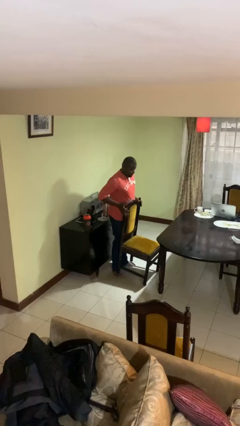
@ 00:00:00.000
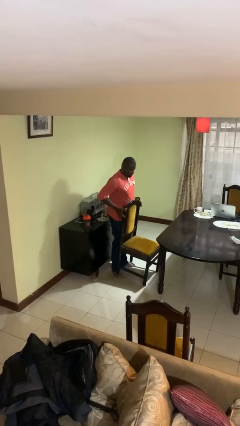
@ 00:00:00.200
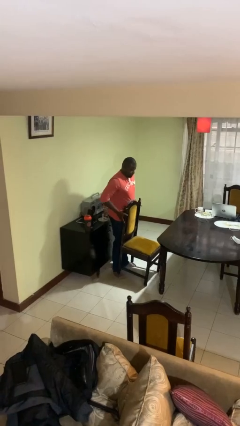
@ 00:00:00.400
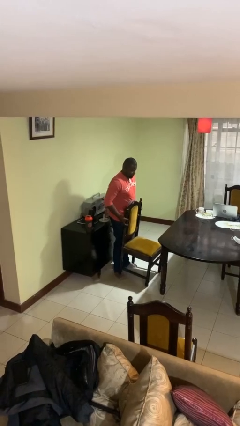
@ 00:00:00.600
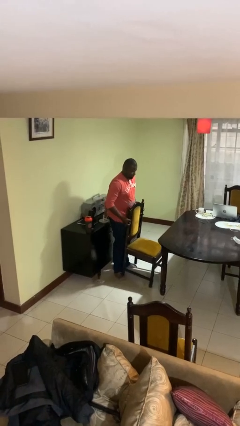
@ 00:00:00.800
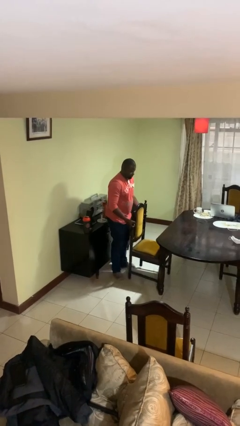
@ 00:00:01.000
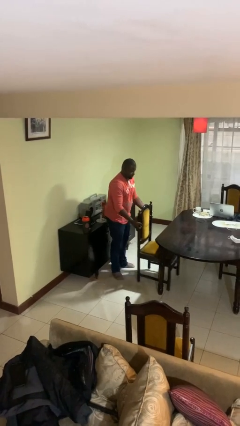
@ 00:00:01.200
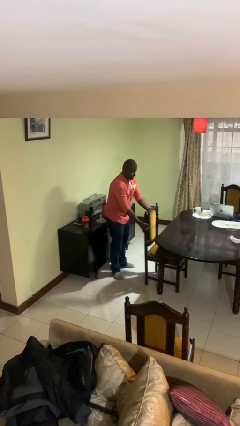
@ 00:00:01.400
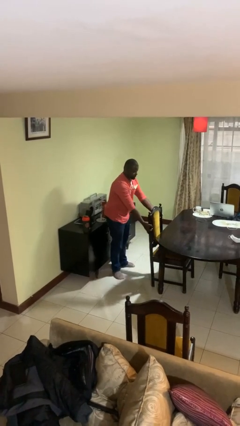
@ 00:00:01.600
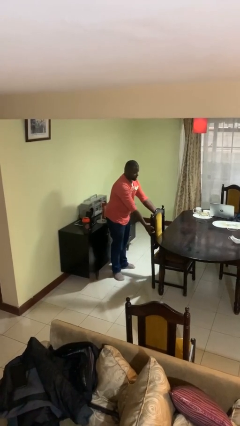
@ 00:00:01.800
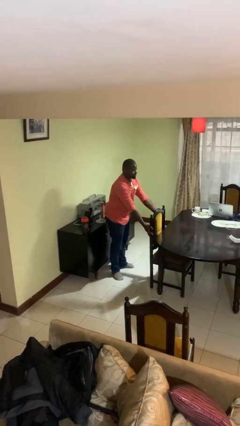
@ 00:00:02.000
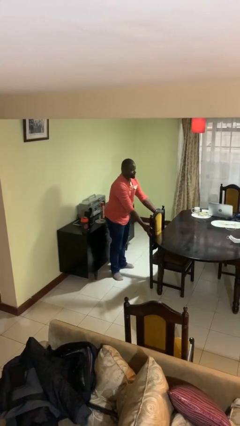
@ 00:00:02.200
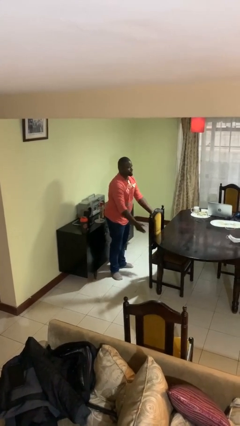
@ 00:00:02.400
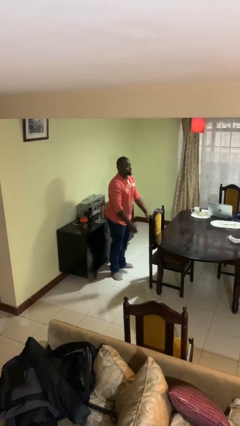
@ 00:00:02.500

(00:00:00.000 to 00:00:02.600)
person pushes in chair

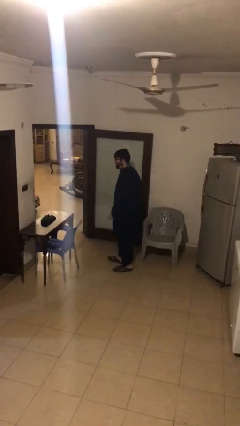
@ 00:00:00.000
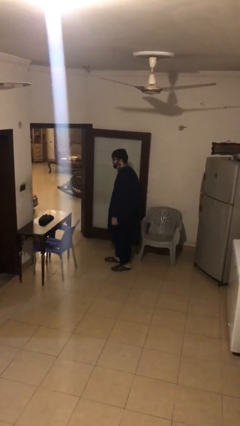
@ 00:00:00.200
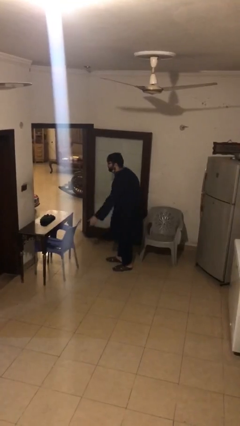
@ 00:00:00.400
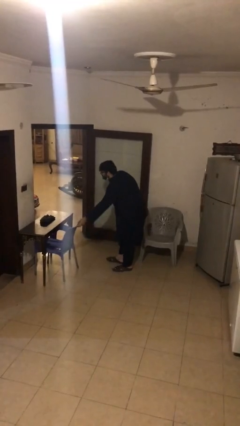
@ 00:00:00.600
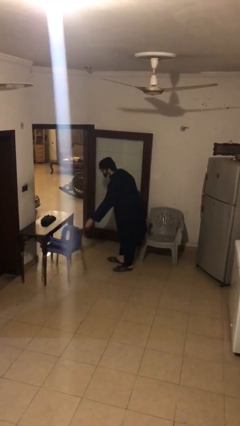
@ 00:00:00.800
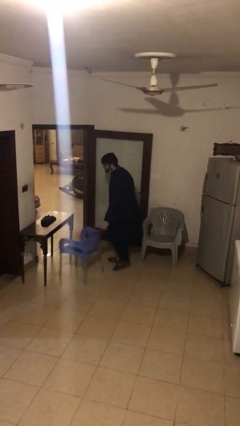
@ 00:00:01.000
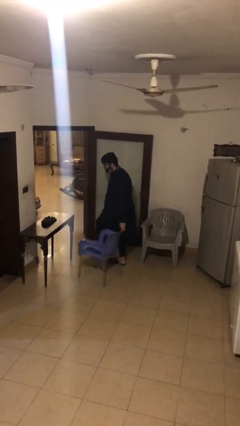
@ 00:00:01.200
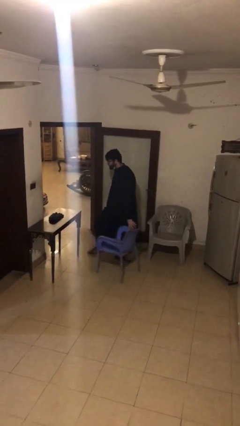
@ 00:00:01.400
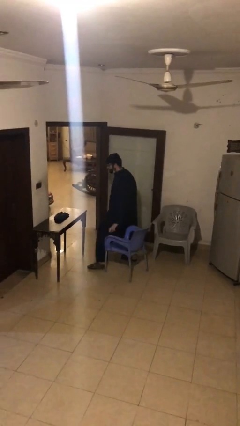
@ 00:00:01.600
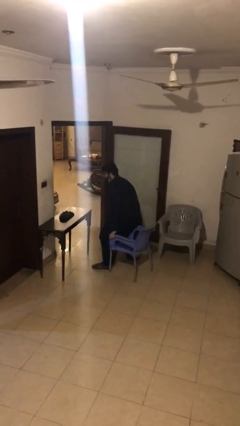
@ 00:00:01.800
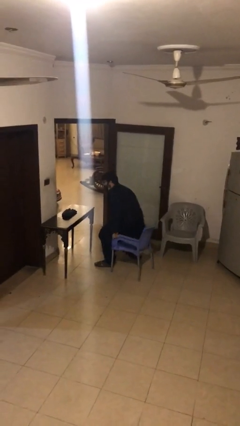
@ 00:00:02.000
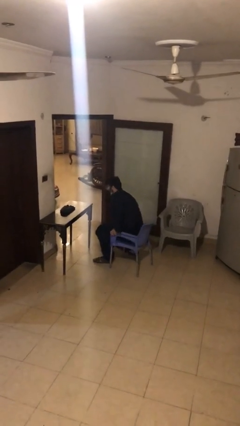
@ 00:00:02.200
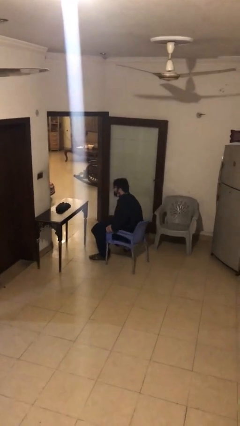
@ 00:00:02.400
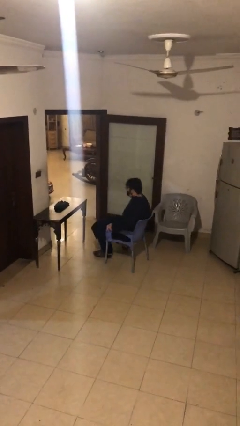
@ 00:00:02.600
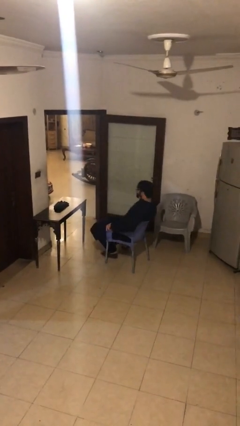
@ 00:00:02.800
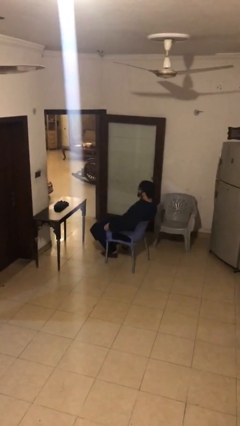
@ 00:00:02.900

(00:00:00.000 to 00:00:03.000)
person sits down

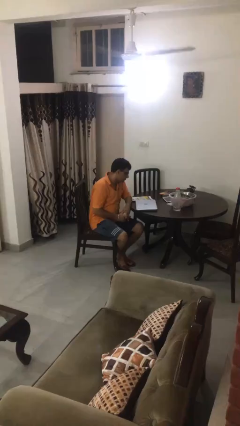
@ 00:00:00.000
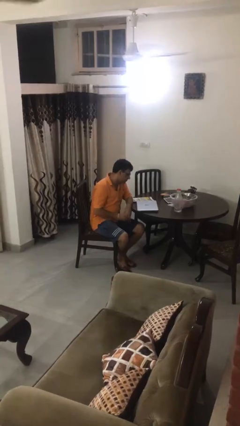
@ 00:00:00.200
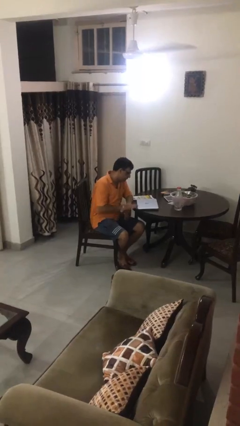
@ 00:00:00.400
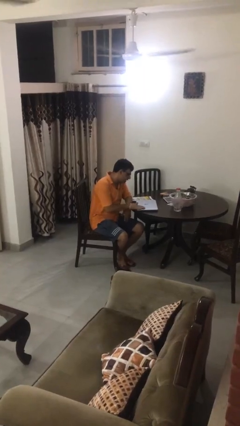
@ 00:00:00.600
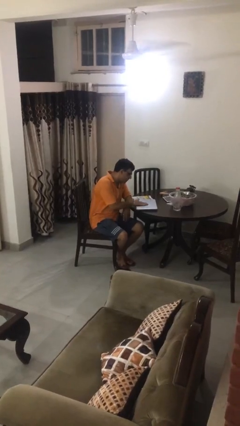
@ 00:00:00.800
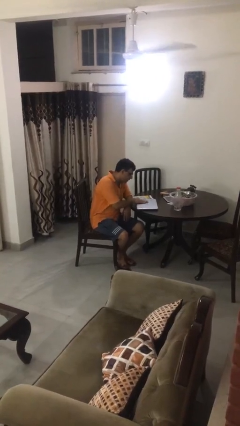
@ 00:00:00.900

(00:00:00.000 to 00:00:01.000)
person waves hand over object

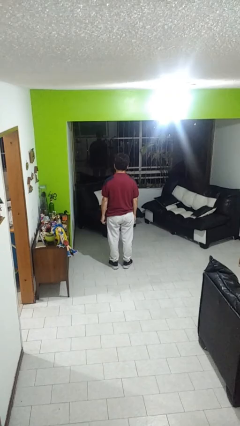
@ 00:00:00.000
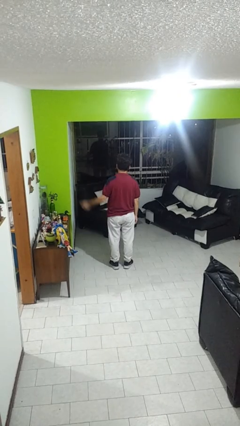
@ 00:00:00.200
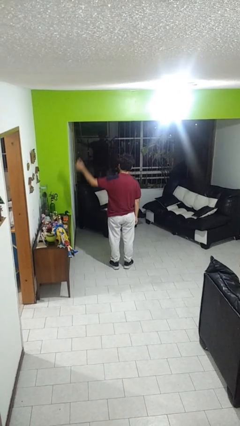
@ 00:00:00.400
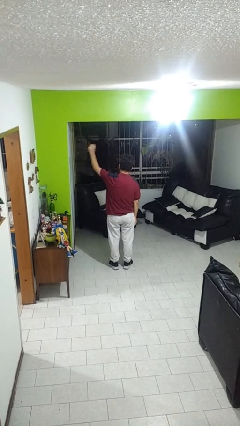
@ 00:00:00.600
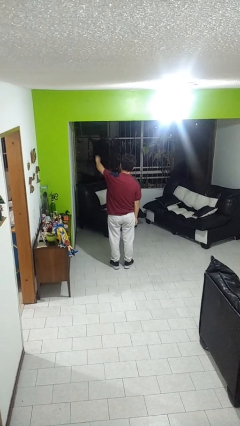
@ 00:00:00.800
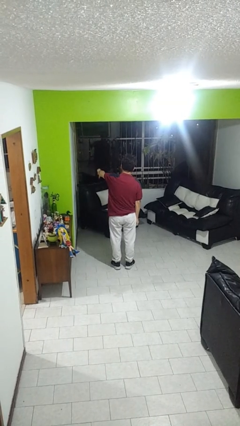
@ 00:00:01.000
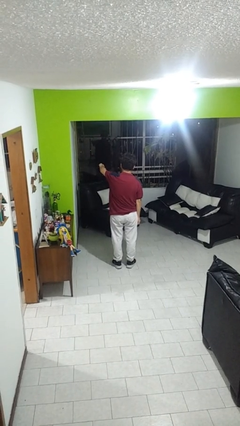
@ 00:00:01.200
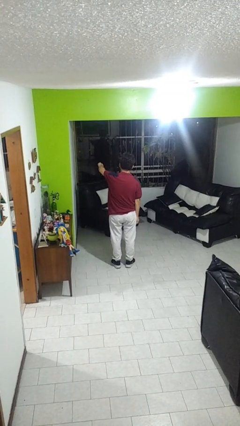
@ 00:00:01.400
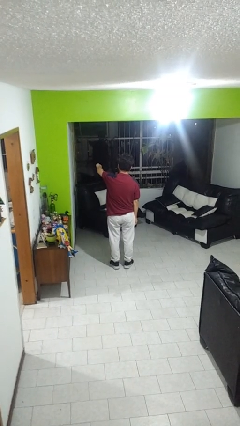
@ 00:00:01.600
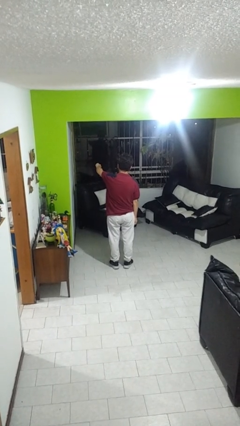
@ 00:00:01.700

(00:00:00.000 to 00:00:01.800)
person gestures thumbs down

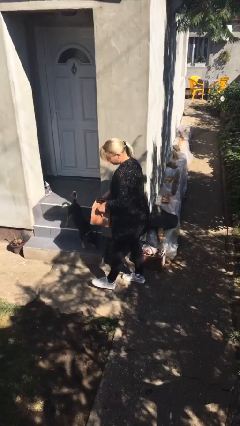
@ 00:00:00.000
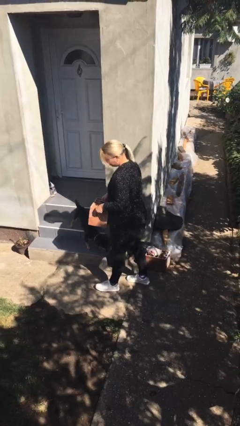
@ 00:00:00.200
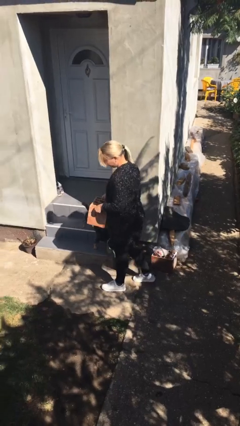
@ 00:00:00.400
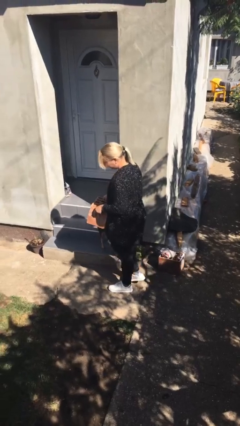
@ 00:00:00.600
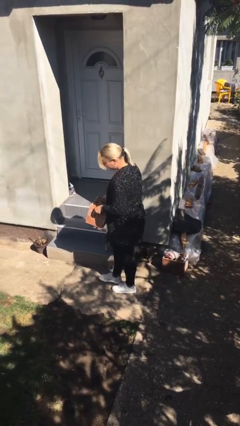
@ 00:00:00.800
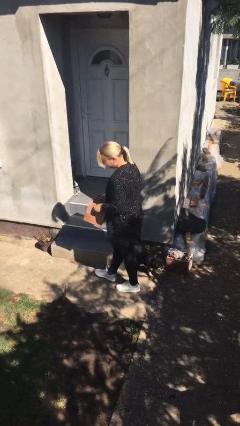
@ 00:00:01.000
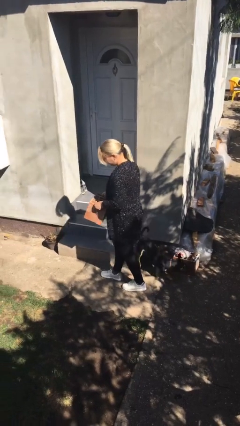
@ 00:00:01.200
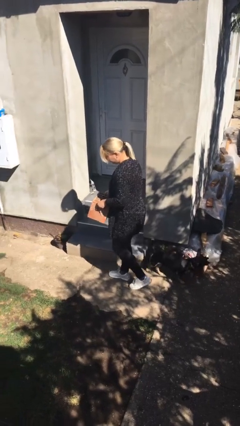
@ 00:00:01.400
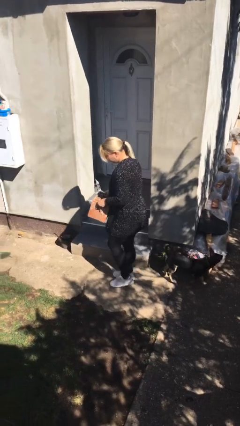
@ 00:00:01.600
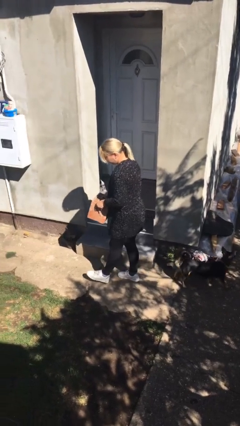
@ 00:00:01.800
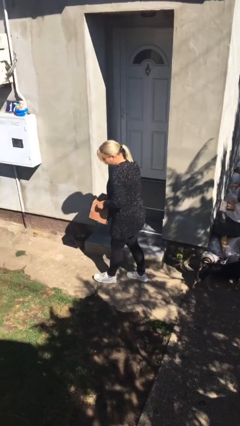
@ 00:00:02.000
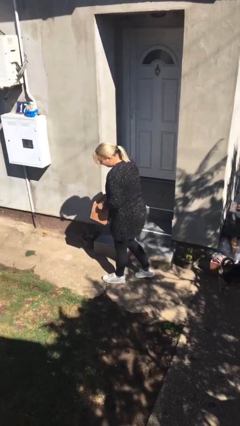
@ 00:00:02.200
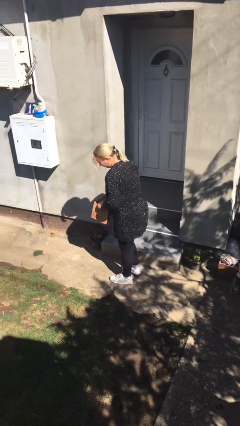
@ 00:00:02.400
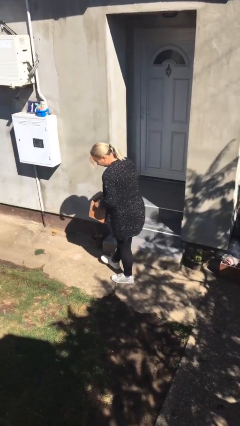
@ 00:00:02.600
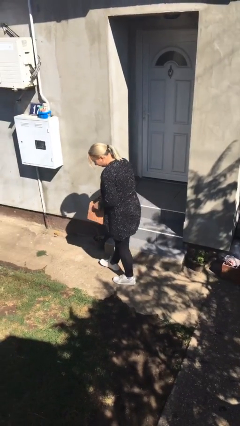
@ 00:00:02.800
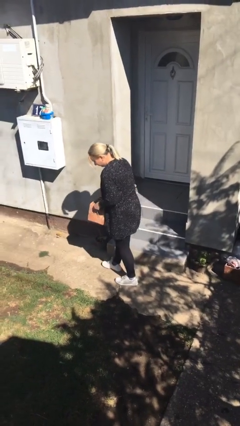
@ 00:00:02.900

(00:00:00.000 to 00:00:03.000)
person carries heavy object

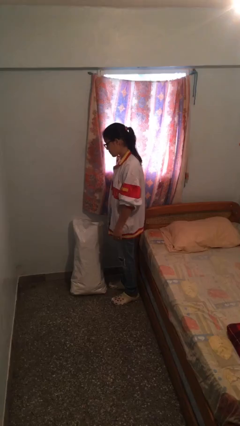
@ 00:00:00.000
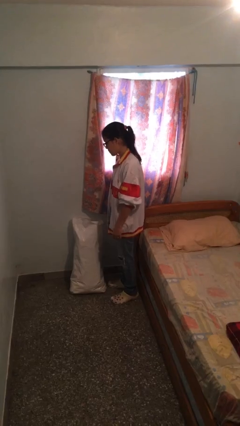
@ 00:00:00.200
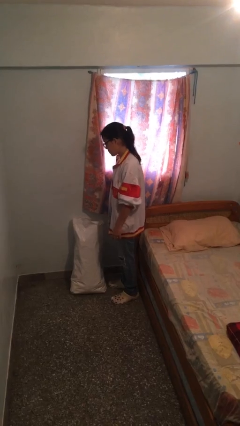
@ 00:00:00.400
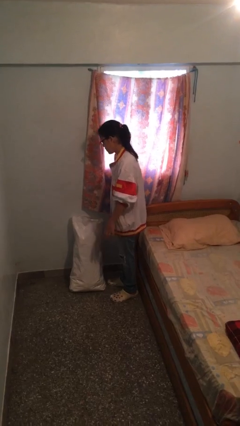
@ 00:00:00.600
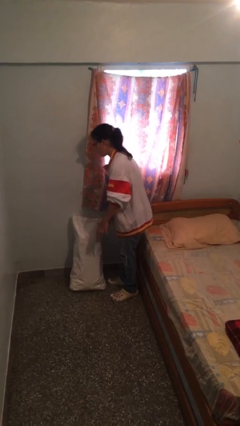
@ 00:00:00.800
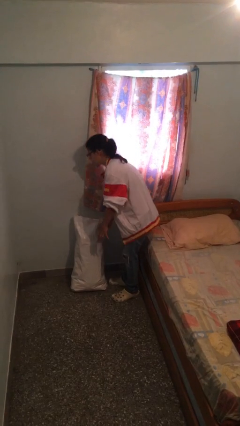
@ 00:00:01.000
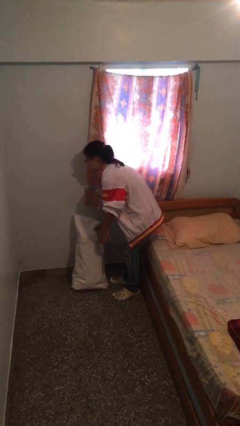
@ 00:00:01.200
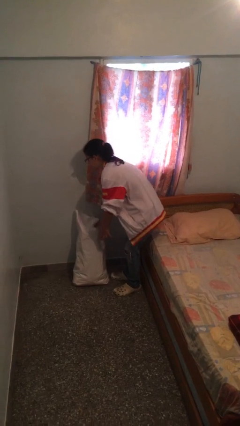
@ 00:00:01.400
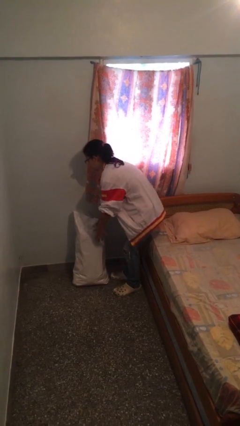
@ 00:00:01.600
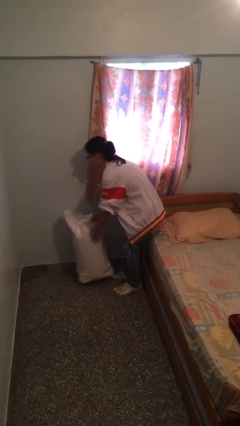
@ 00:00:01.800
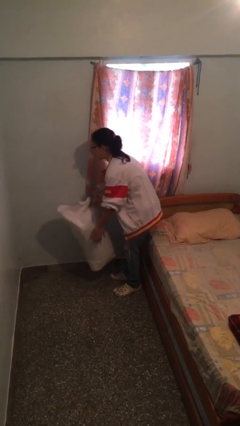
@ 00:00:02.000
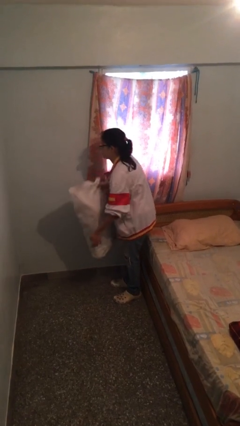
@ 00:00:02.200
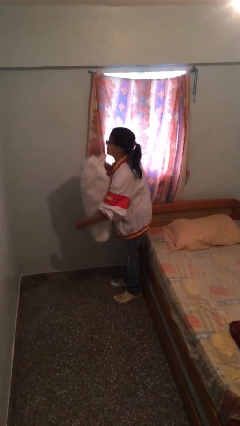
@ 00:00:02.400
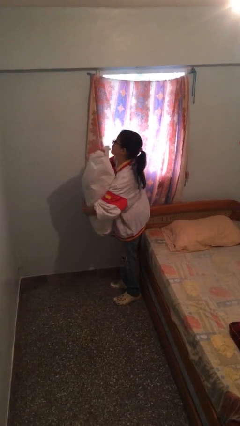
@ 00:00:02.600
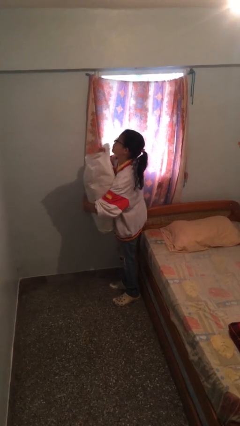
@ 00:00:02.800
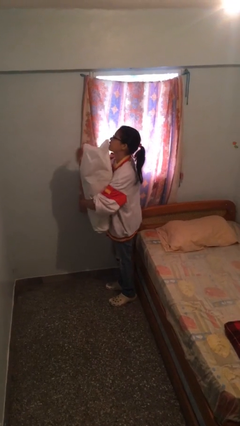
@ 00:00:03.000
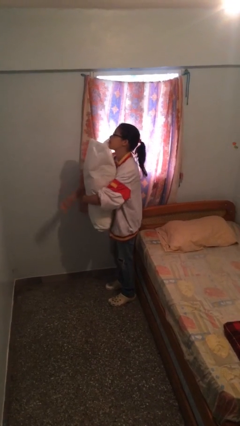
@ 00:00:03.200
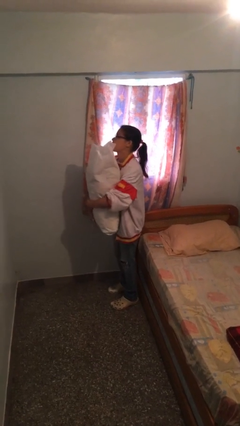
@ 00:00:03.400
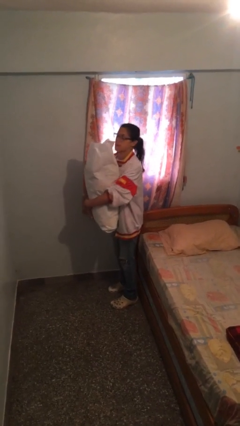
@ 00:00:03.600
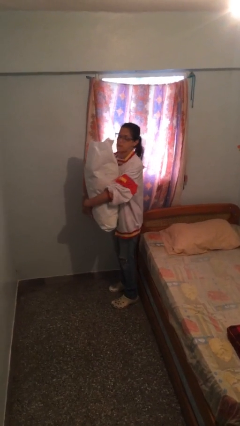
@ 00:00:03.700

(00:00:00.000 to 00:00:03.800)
person picks up object from floor

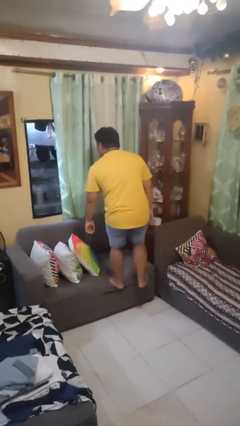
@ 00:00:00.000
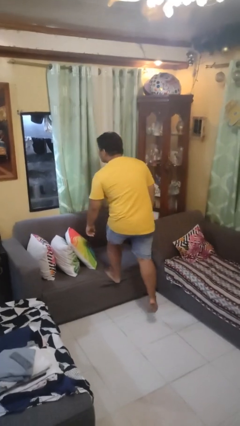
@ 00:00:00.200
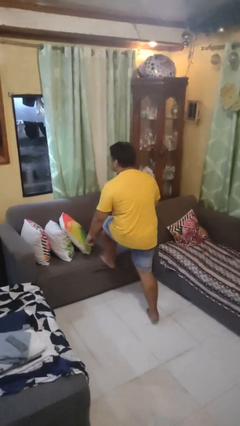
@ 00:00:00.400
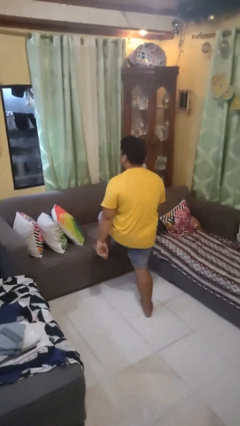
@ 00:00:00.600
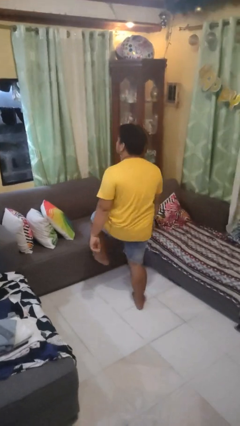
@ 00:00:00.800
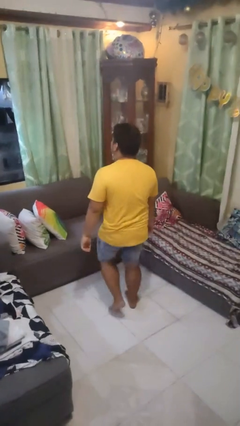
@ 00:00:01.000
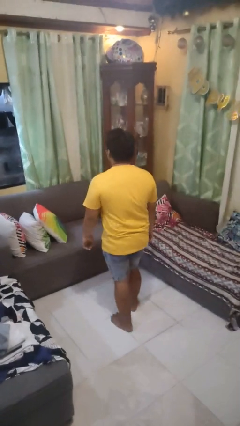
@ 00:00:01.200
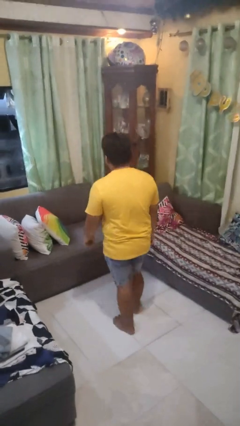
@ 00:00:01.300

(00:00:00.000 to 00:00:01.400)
person climbs off couch

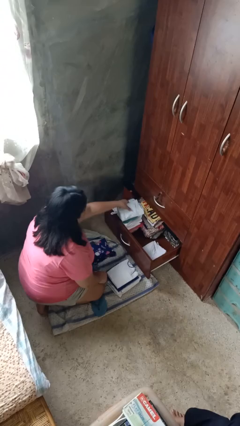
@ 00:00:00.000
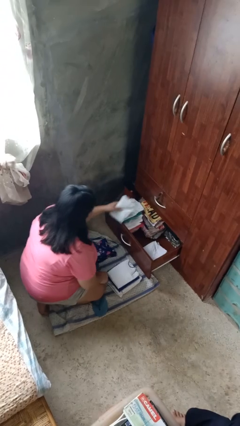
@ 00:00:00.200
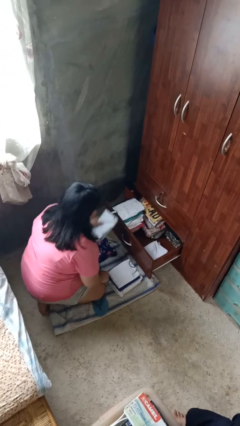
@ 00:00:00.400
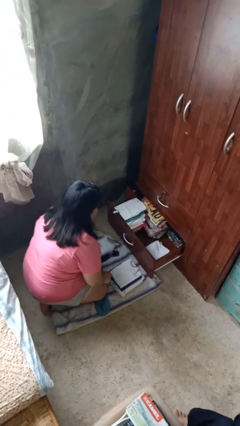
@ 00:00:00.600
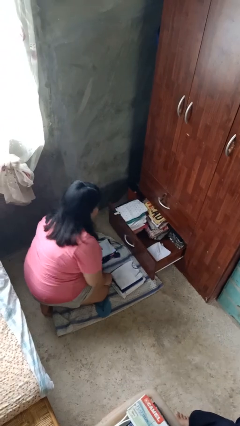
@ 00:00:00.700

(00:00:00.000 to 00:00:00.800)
person takes clothes from dresser
